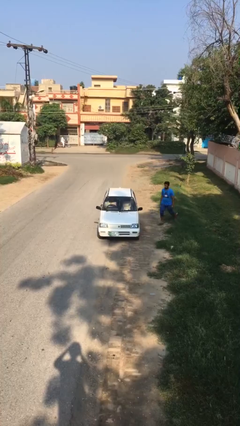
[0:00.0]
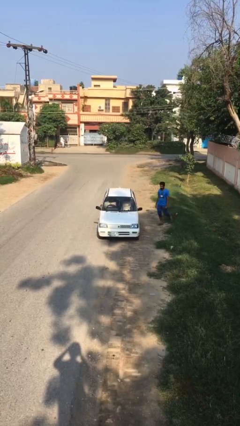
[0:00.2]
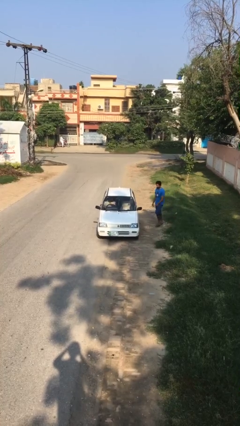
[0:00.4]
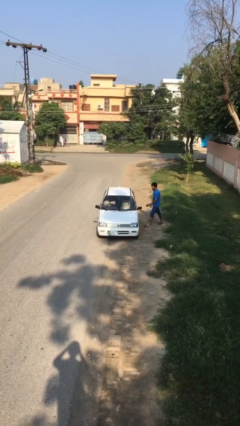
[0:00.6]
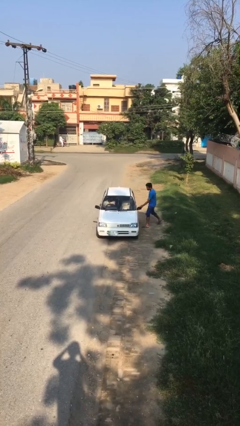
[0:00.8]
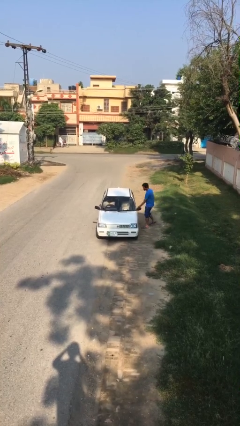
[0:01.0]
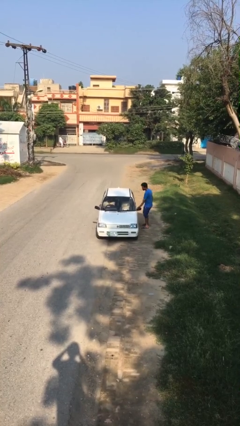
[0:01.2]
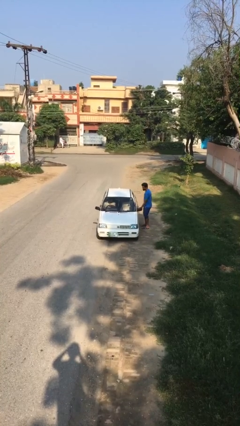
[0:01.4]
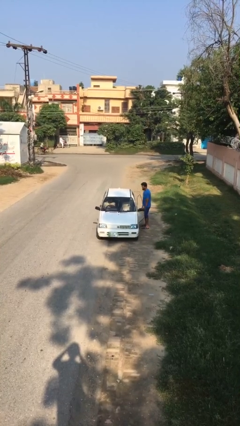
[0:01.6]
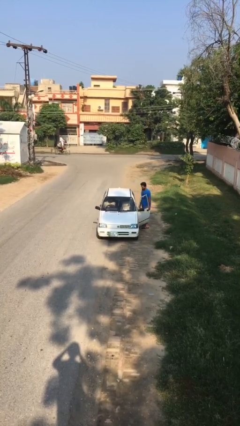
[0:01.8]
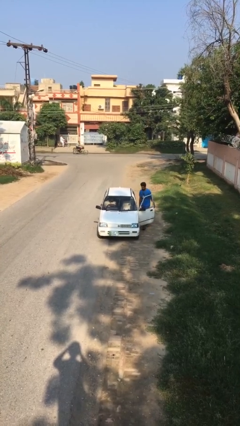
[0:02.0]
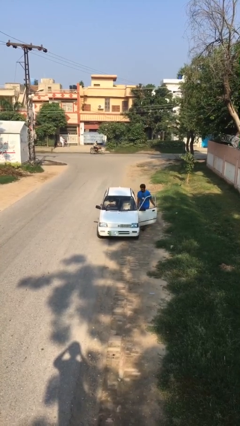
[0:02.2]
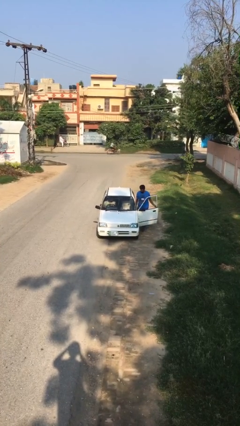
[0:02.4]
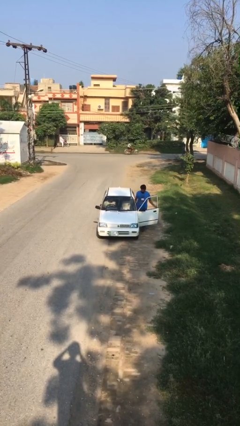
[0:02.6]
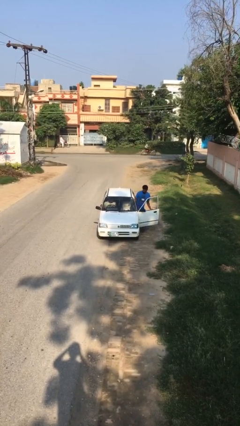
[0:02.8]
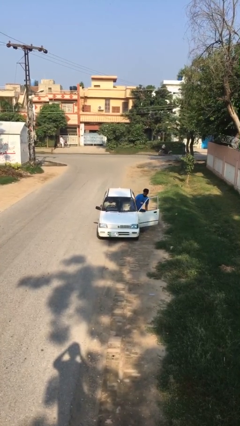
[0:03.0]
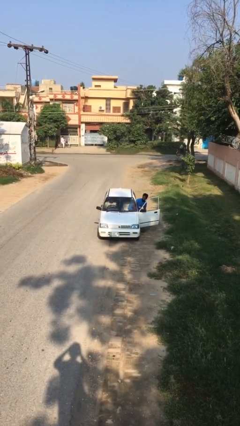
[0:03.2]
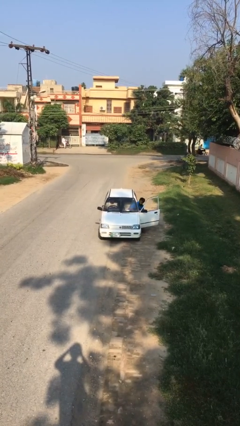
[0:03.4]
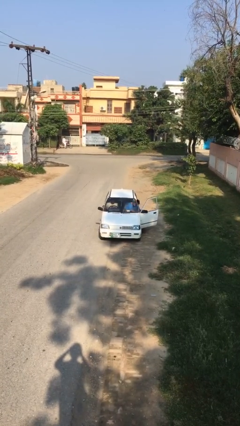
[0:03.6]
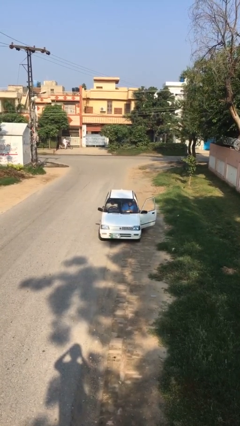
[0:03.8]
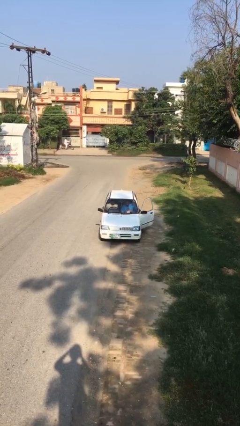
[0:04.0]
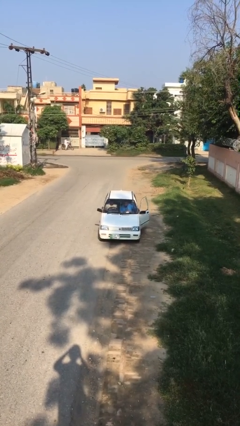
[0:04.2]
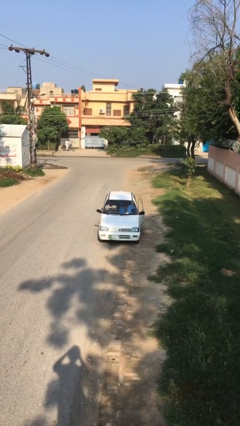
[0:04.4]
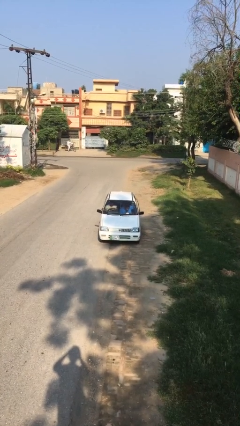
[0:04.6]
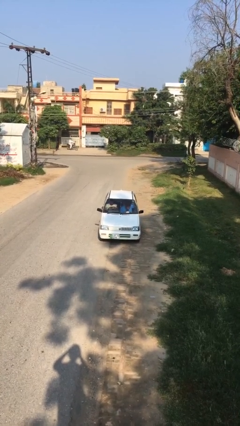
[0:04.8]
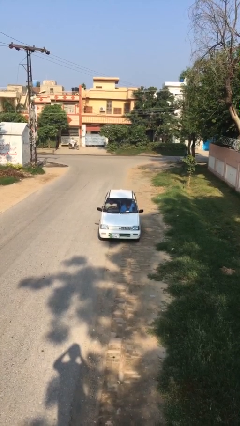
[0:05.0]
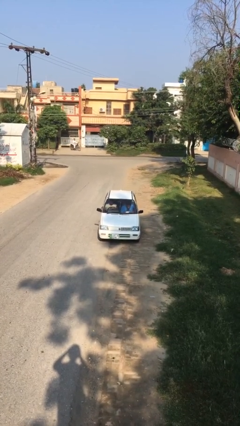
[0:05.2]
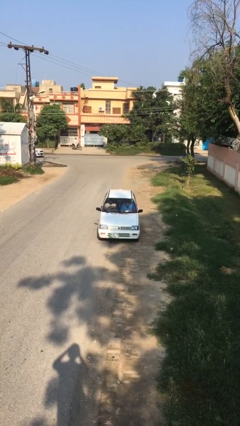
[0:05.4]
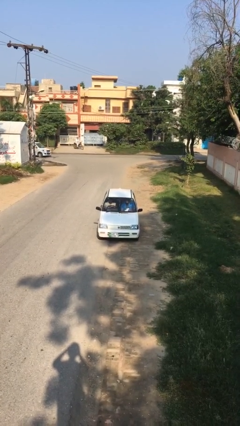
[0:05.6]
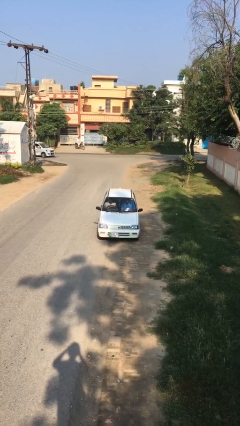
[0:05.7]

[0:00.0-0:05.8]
car picks up person

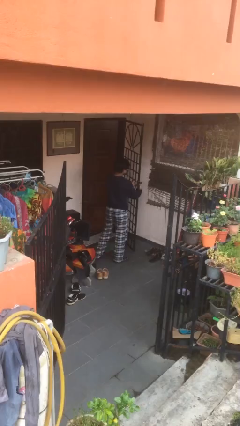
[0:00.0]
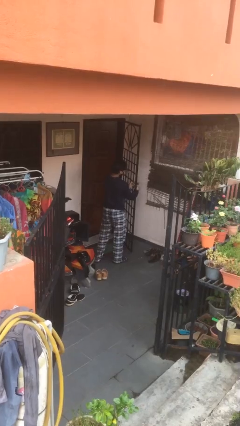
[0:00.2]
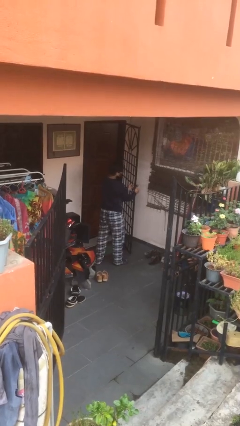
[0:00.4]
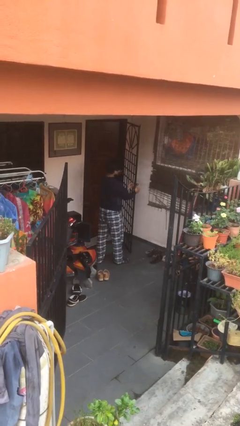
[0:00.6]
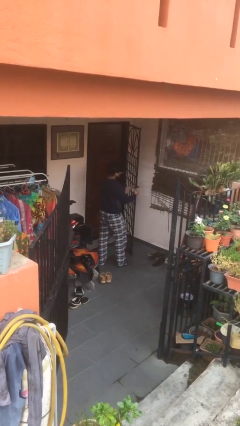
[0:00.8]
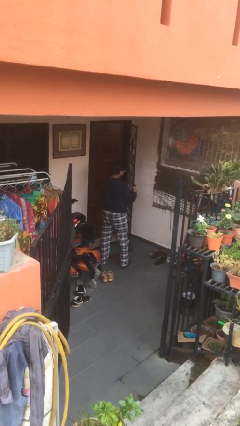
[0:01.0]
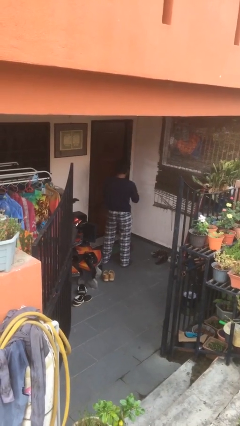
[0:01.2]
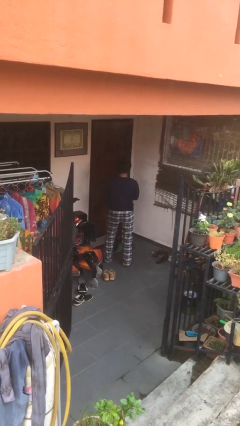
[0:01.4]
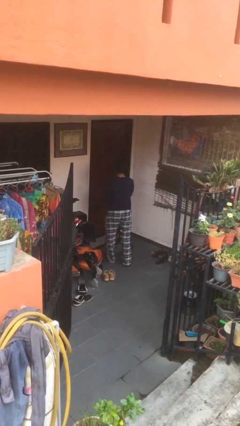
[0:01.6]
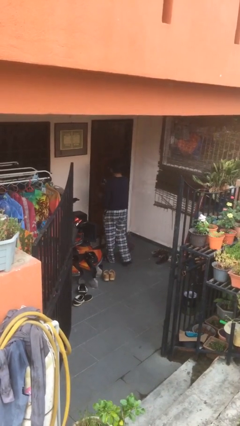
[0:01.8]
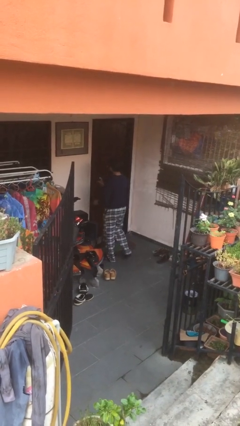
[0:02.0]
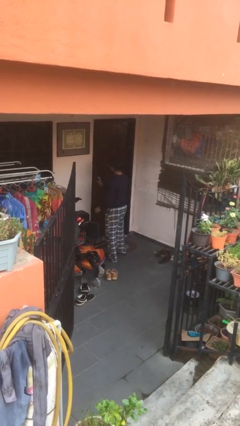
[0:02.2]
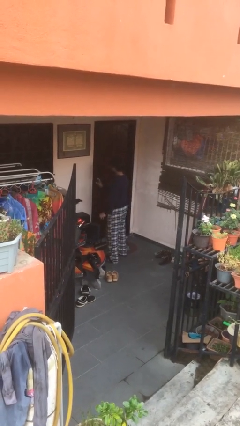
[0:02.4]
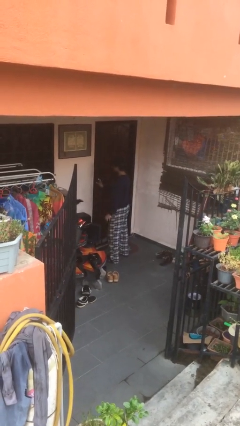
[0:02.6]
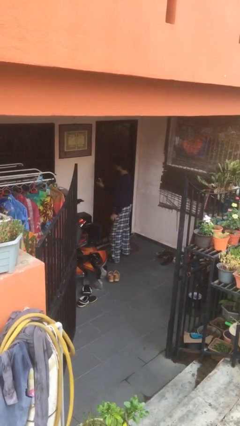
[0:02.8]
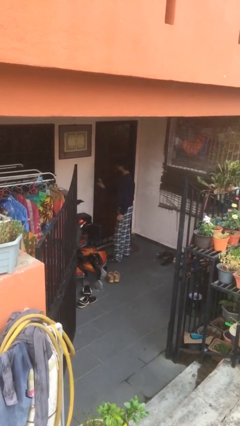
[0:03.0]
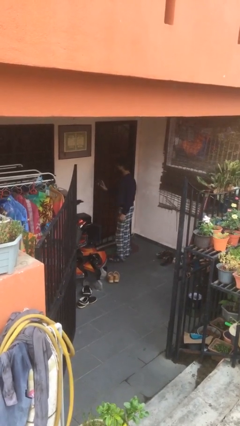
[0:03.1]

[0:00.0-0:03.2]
person closes facility door

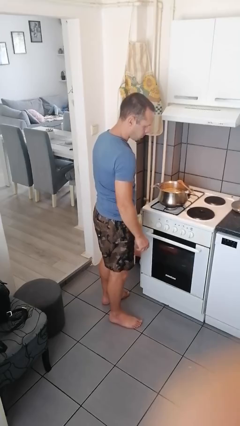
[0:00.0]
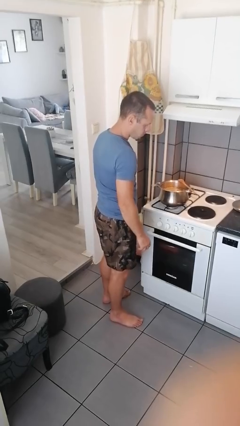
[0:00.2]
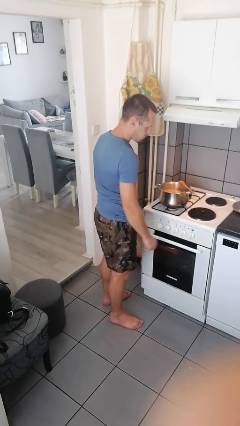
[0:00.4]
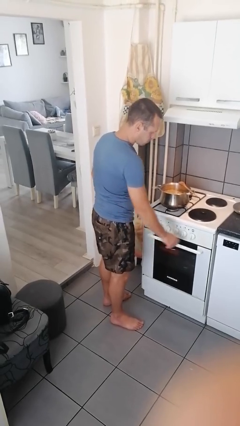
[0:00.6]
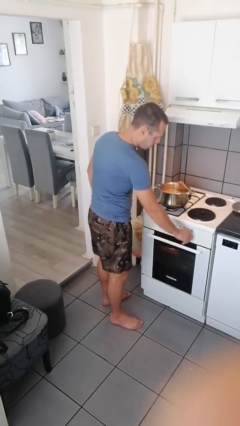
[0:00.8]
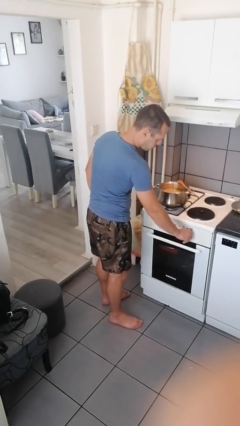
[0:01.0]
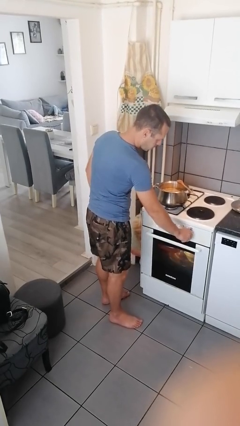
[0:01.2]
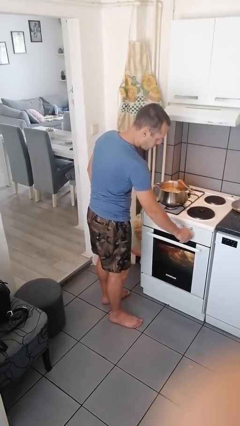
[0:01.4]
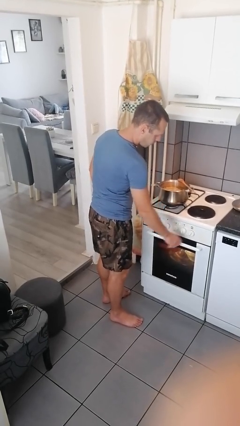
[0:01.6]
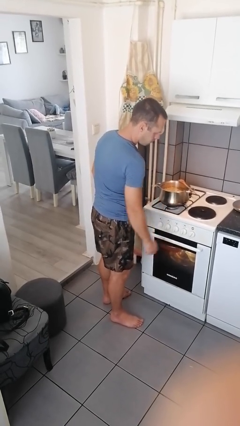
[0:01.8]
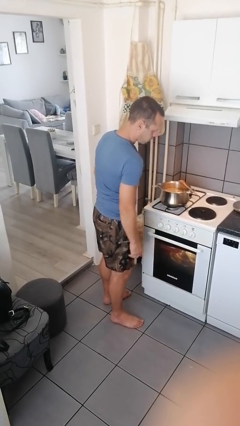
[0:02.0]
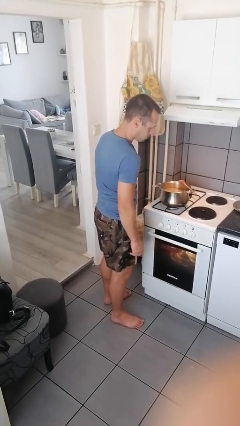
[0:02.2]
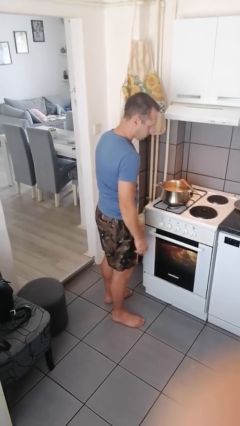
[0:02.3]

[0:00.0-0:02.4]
person turns on stovetop

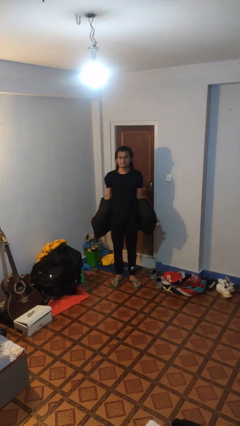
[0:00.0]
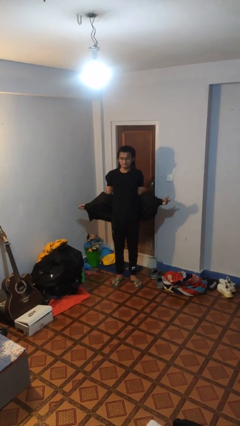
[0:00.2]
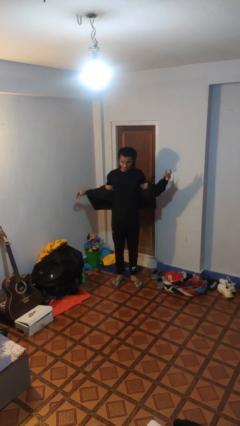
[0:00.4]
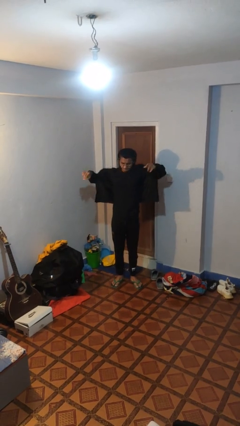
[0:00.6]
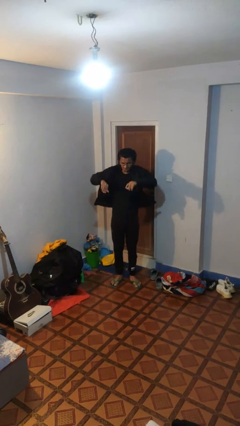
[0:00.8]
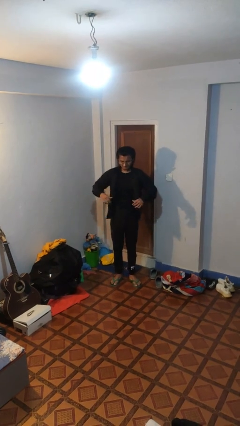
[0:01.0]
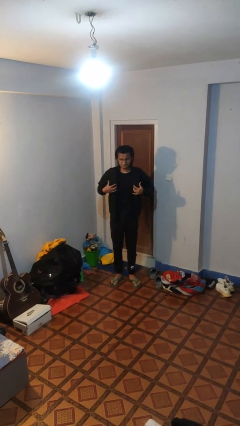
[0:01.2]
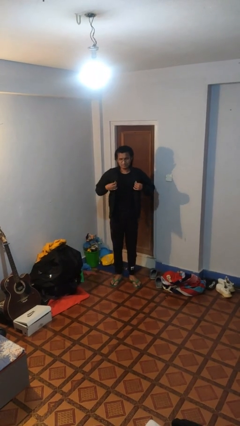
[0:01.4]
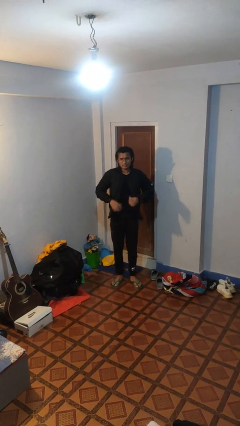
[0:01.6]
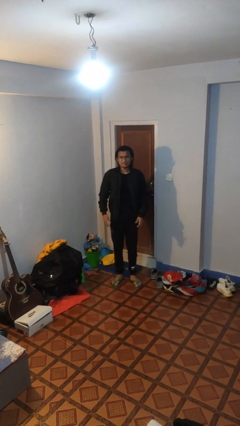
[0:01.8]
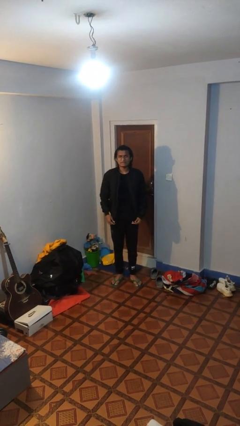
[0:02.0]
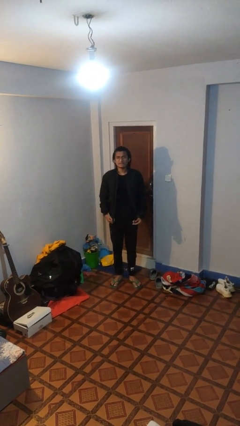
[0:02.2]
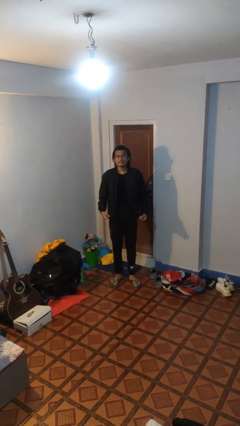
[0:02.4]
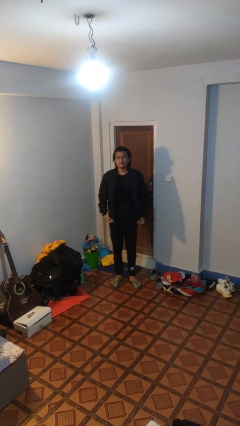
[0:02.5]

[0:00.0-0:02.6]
person puts on jacket

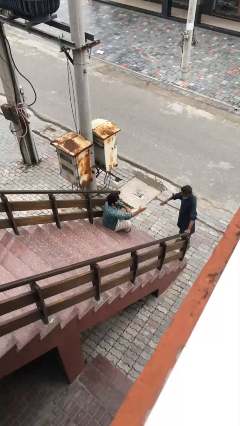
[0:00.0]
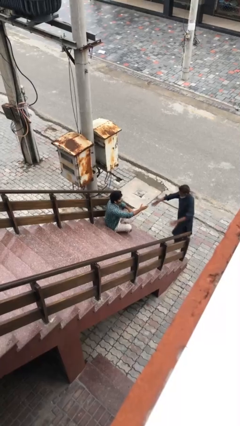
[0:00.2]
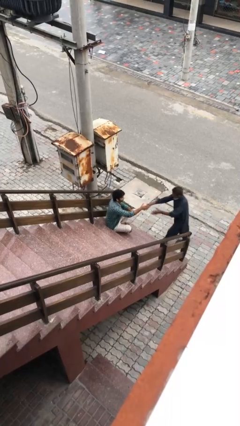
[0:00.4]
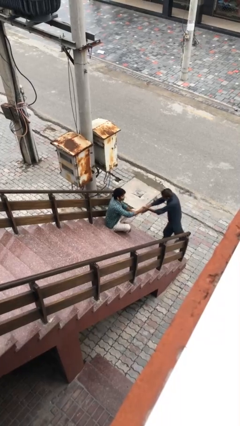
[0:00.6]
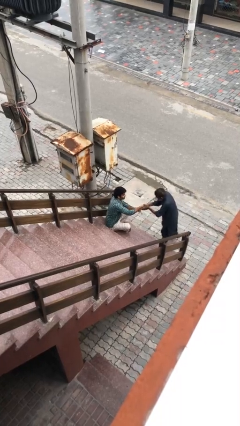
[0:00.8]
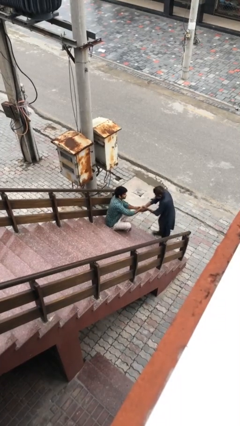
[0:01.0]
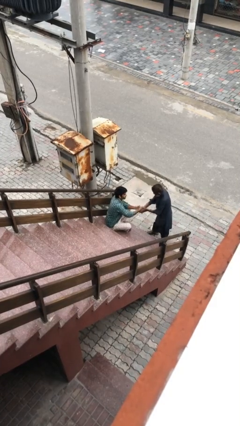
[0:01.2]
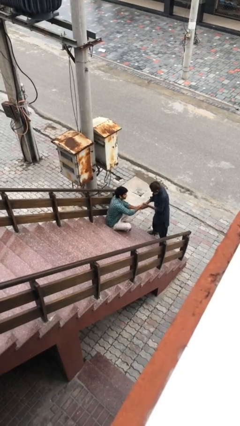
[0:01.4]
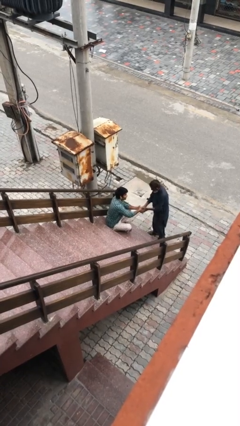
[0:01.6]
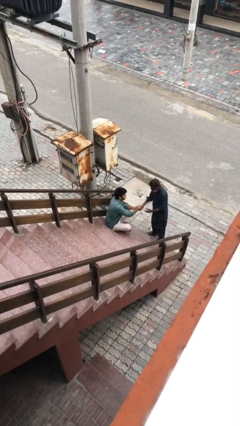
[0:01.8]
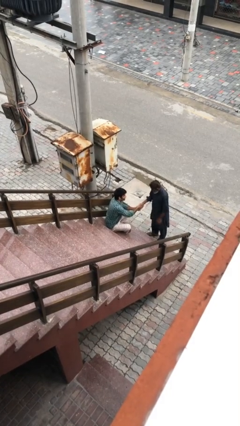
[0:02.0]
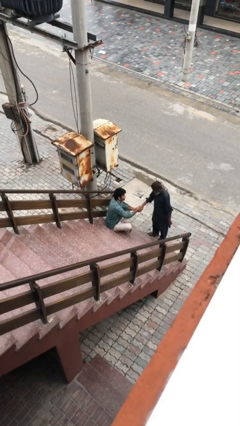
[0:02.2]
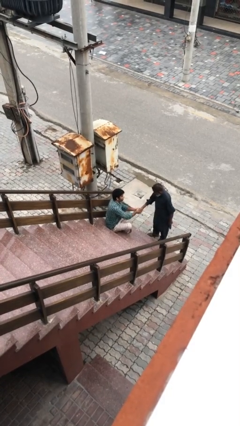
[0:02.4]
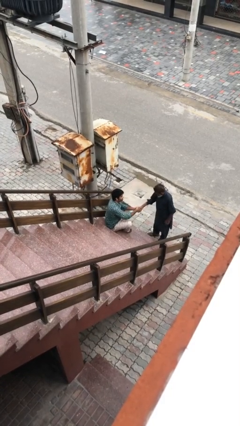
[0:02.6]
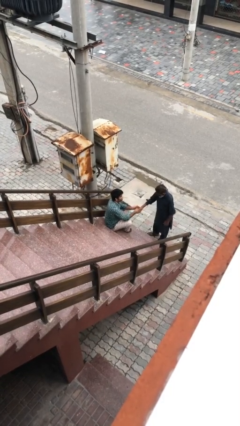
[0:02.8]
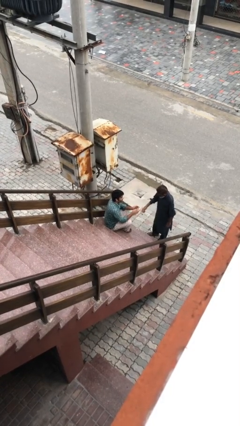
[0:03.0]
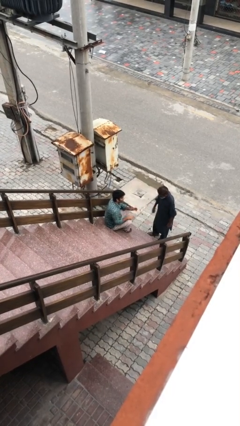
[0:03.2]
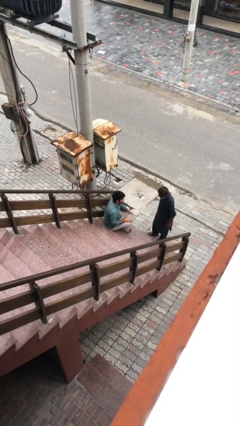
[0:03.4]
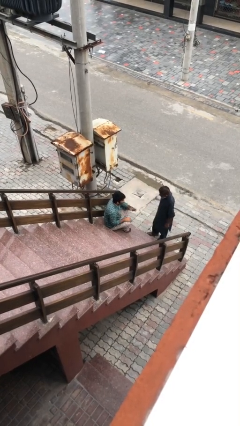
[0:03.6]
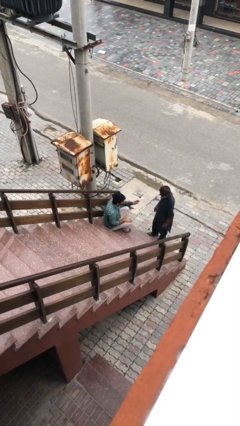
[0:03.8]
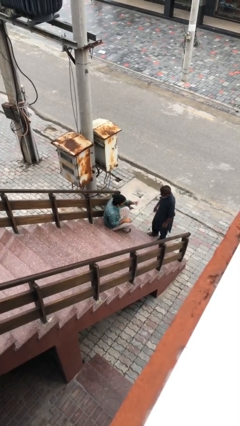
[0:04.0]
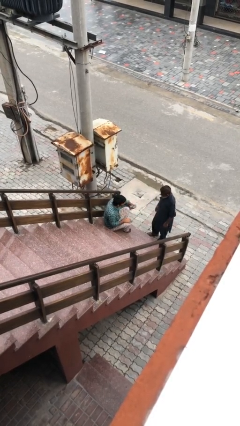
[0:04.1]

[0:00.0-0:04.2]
person shakes hand
